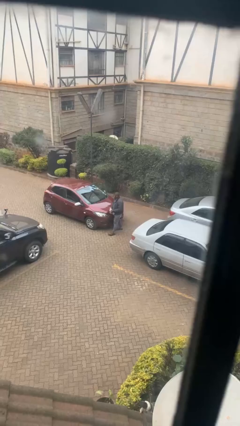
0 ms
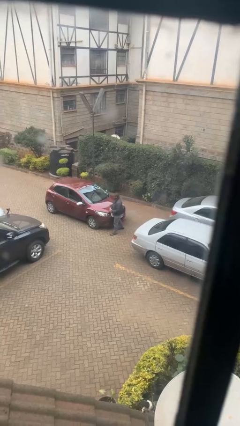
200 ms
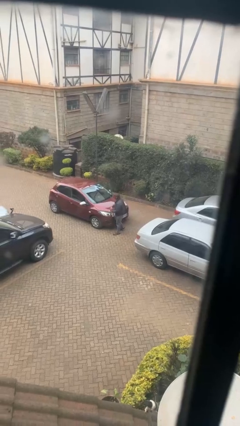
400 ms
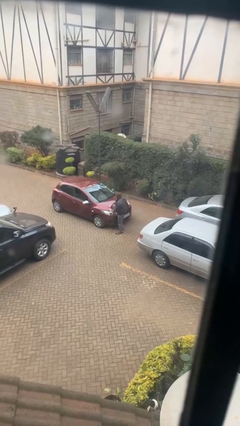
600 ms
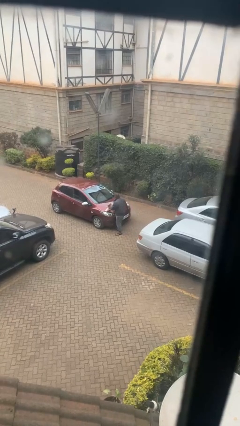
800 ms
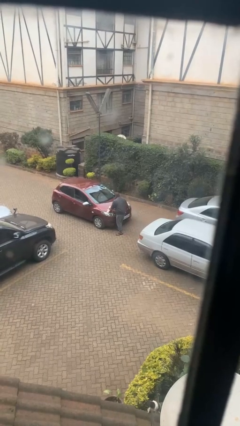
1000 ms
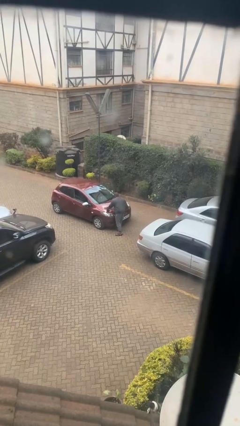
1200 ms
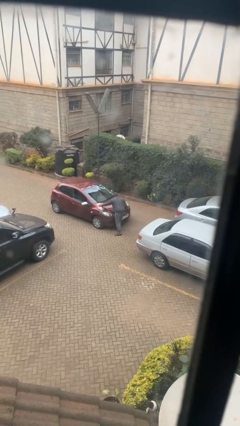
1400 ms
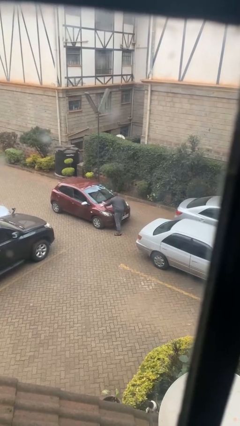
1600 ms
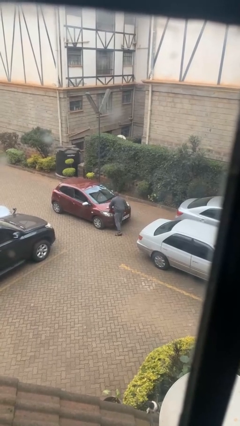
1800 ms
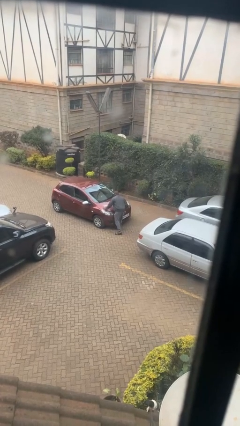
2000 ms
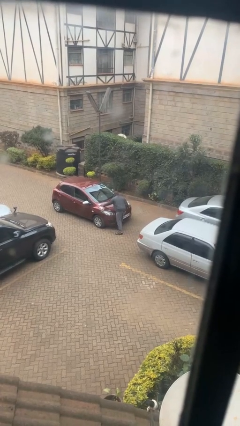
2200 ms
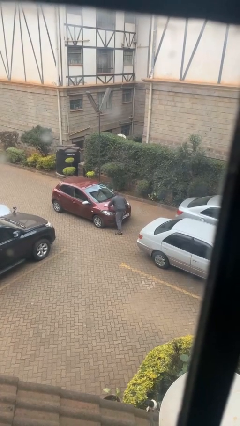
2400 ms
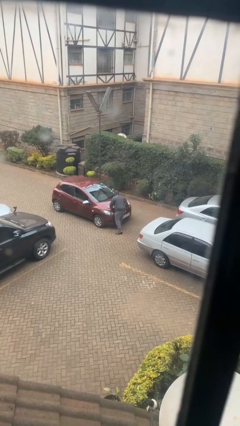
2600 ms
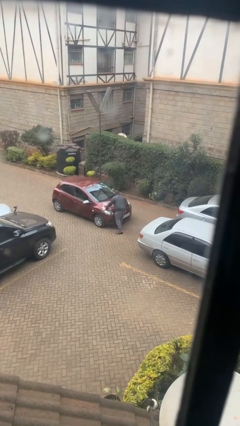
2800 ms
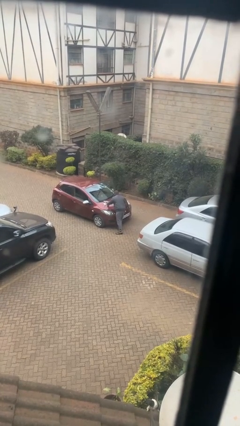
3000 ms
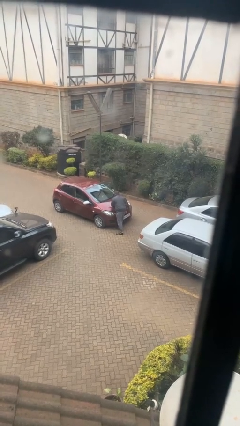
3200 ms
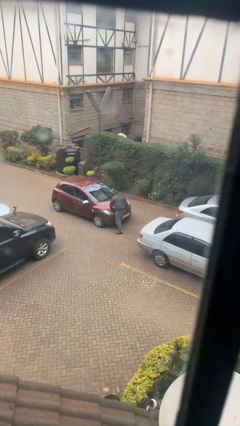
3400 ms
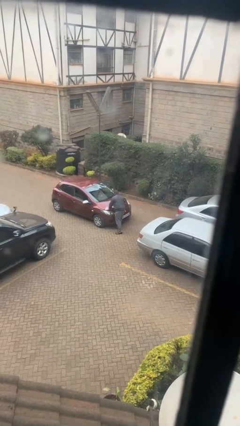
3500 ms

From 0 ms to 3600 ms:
person polishes car with rag

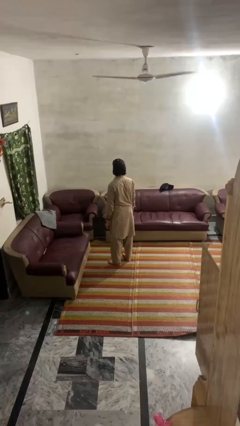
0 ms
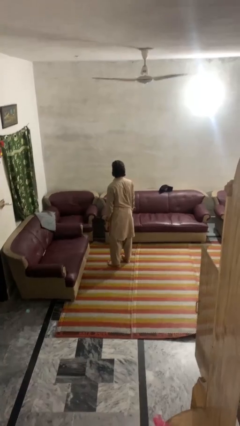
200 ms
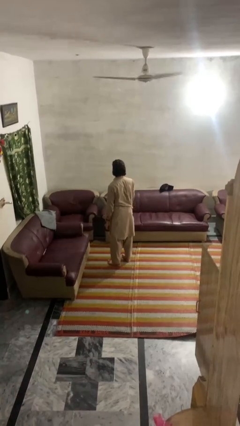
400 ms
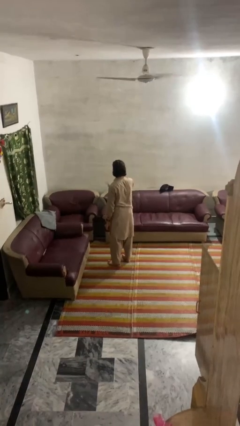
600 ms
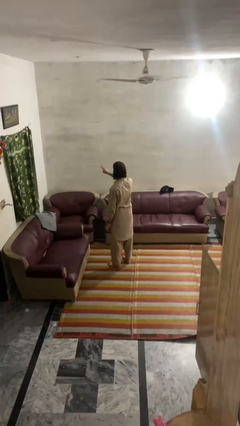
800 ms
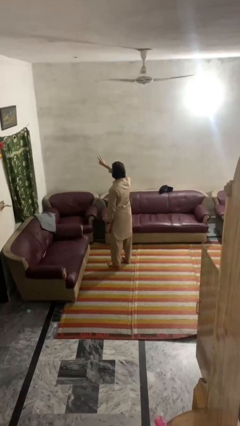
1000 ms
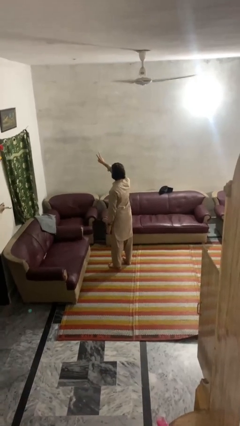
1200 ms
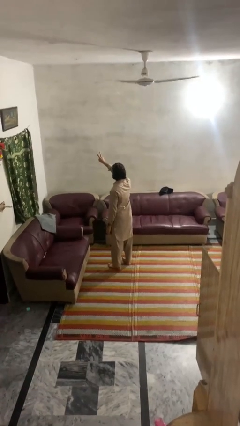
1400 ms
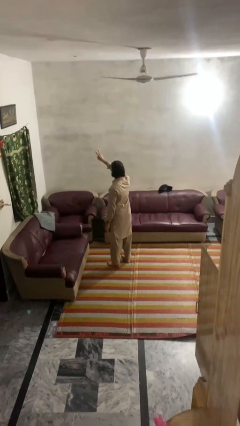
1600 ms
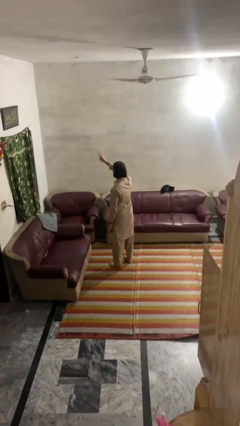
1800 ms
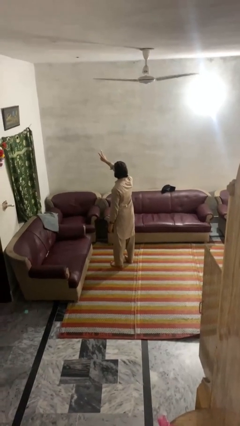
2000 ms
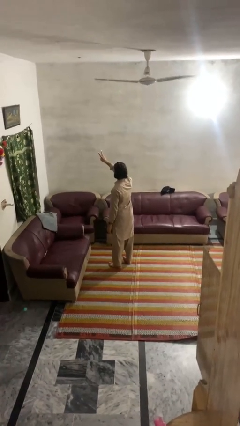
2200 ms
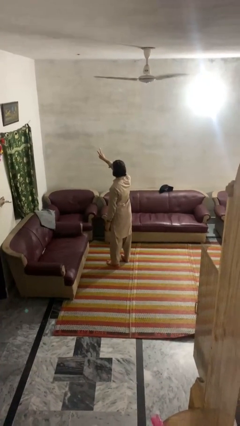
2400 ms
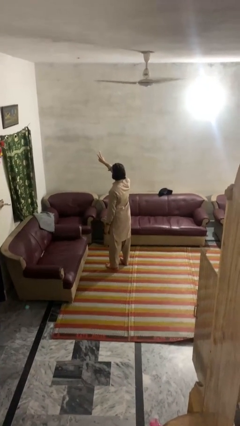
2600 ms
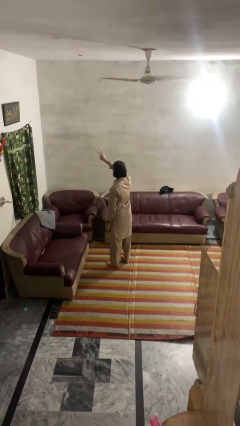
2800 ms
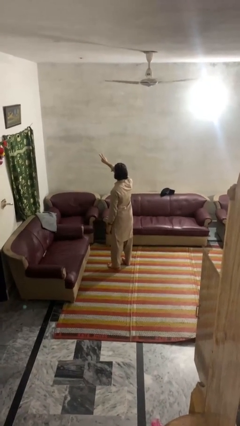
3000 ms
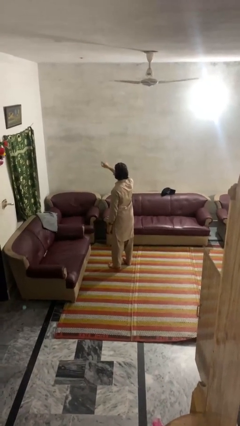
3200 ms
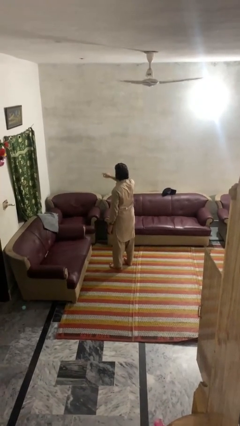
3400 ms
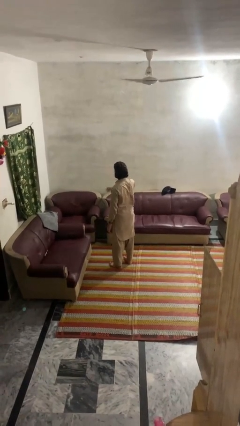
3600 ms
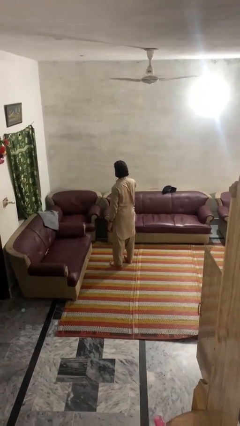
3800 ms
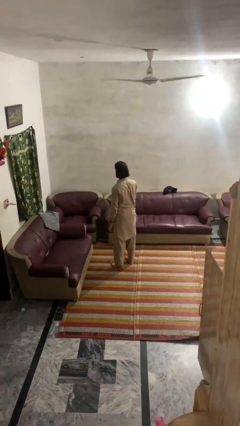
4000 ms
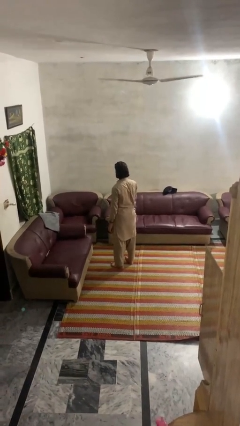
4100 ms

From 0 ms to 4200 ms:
person gestures peace

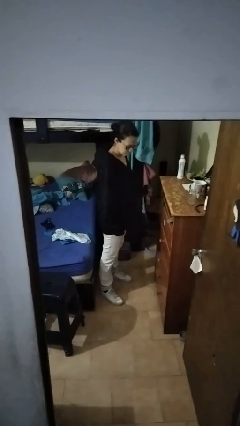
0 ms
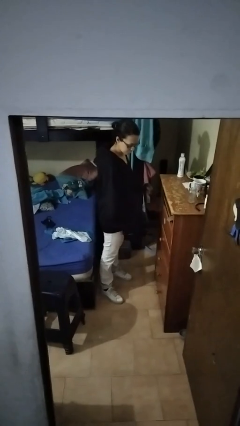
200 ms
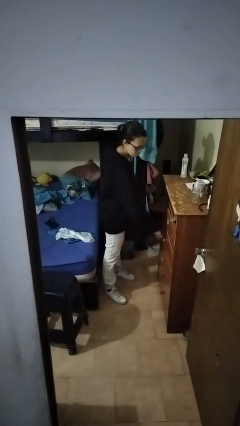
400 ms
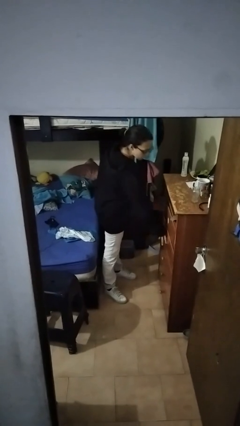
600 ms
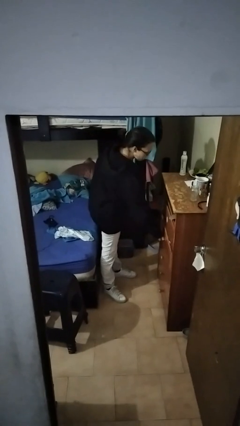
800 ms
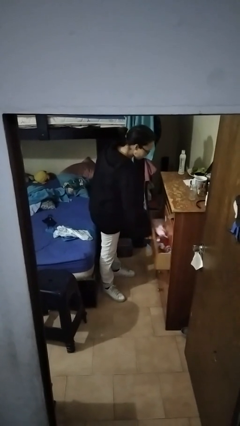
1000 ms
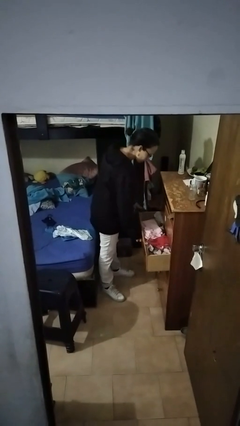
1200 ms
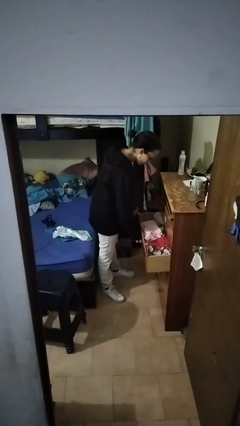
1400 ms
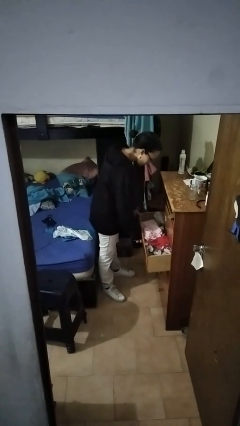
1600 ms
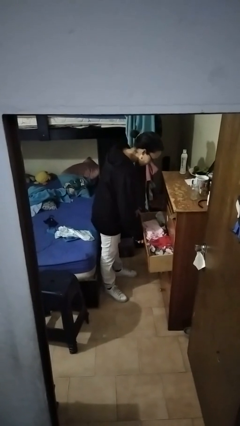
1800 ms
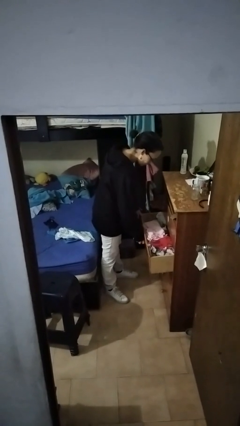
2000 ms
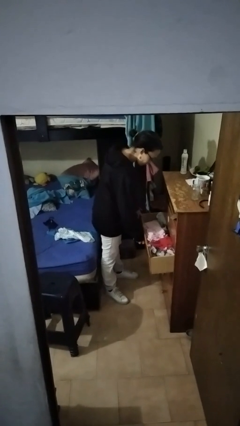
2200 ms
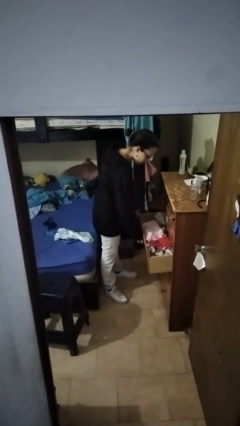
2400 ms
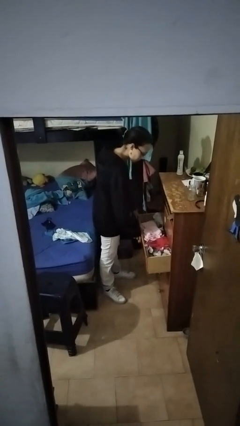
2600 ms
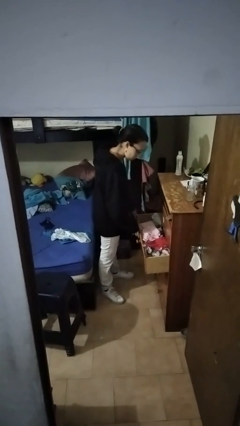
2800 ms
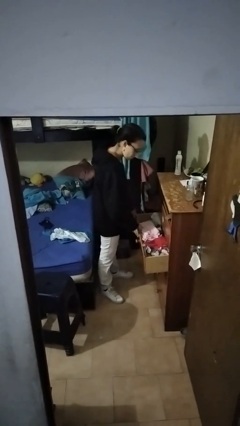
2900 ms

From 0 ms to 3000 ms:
person opens dresser drawer

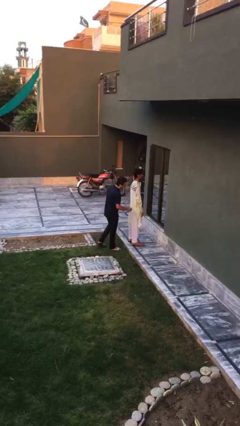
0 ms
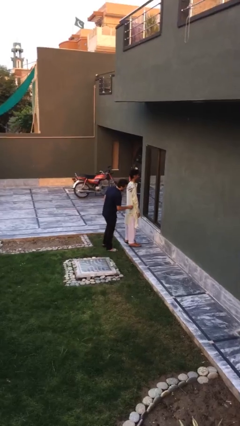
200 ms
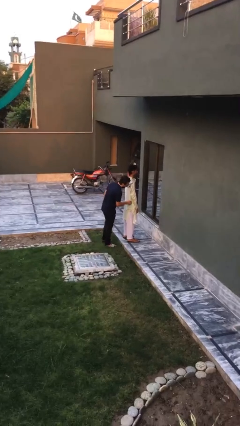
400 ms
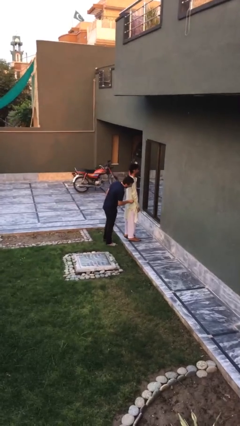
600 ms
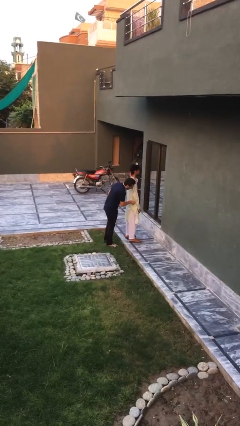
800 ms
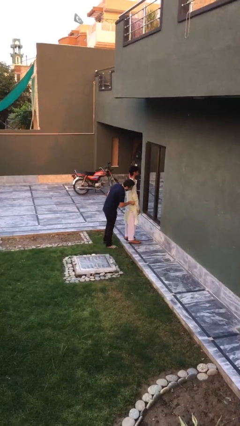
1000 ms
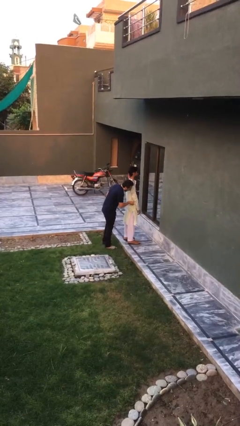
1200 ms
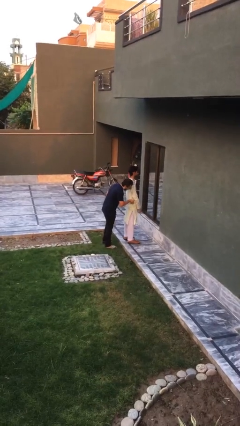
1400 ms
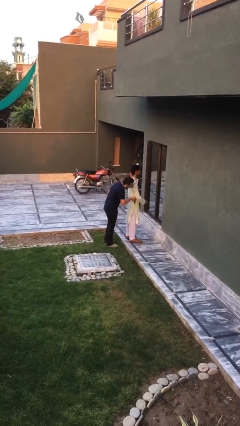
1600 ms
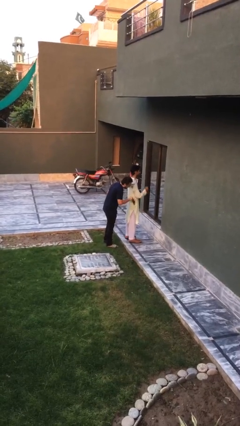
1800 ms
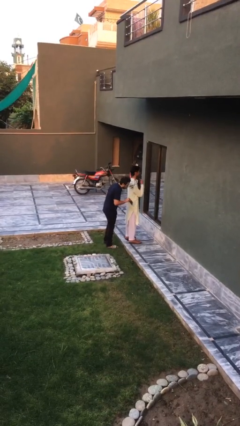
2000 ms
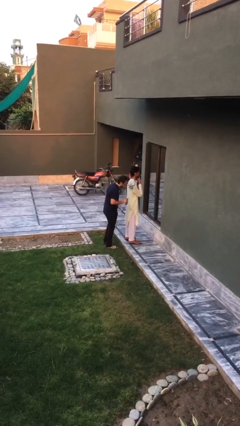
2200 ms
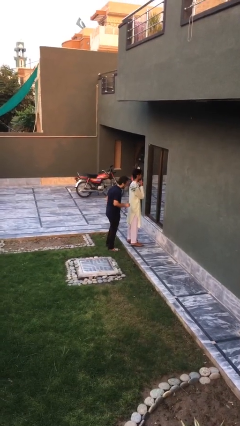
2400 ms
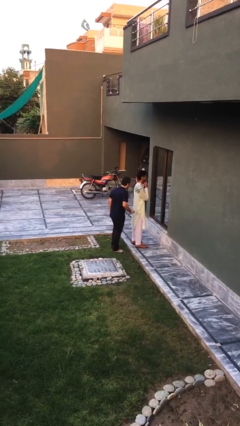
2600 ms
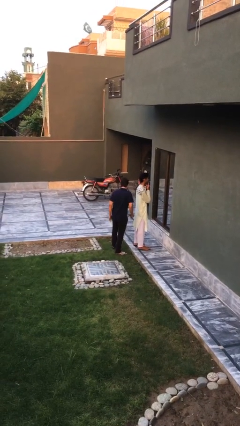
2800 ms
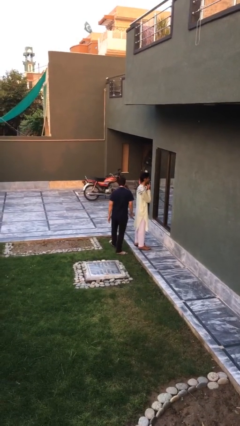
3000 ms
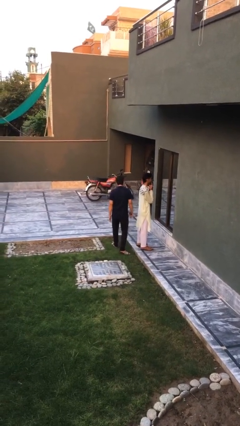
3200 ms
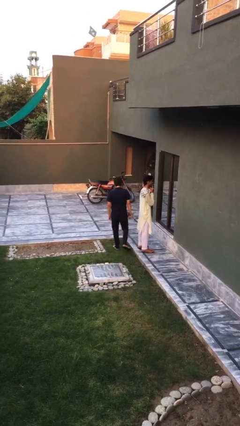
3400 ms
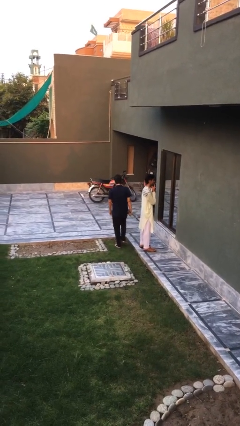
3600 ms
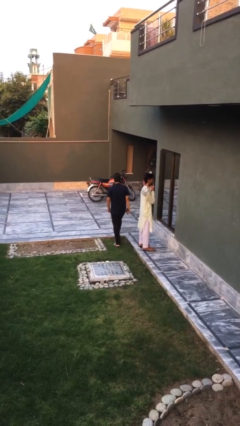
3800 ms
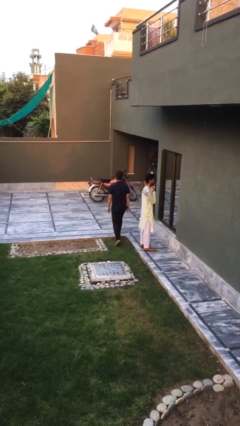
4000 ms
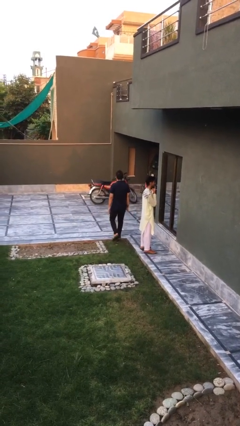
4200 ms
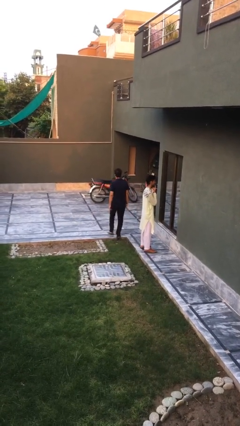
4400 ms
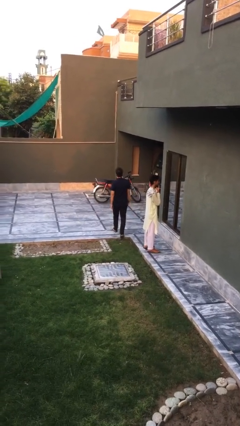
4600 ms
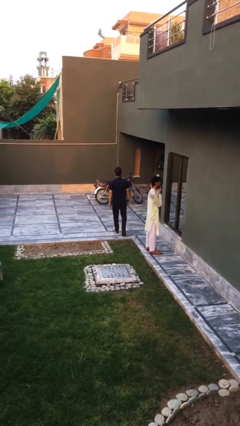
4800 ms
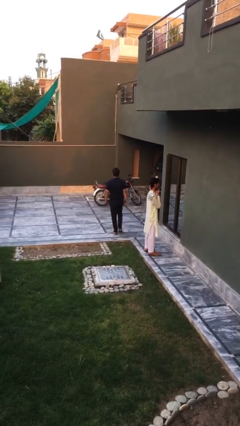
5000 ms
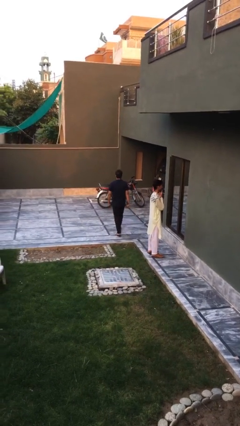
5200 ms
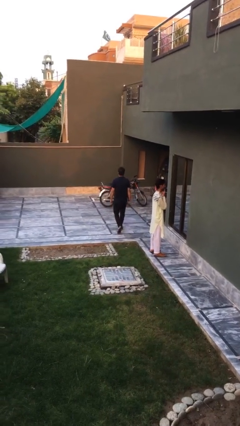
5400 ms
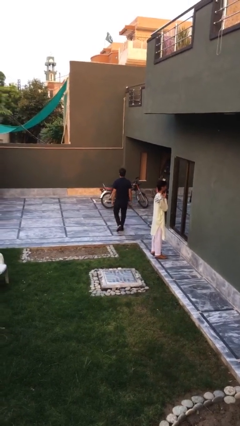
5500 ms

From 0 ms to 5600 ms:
person steals object from person

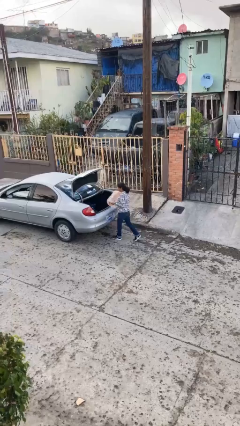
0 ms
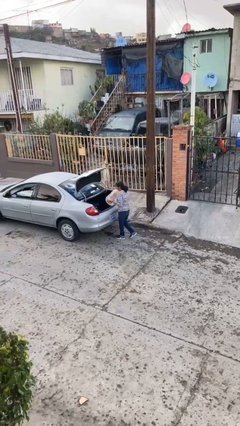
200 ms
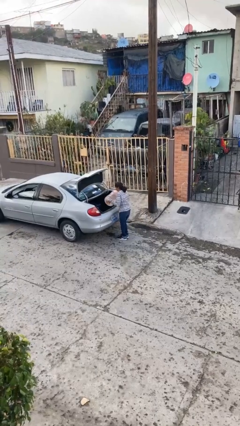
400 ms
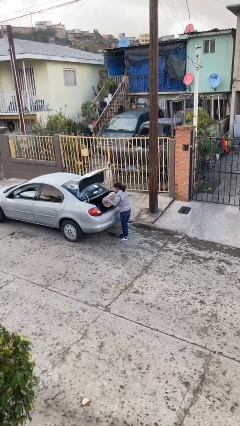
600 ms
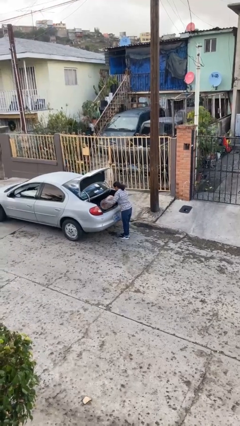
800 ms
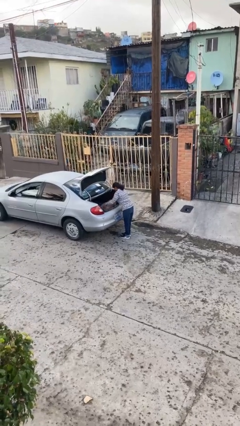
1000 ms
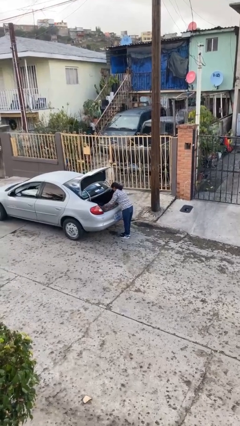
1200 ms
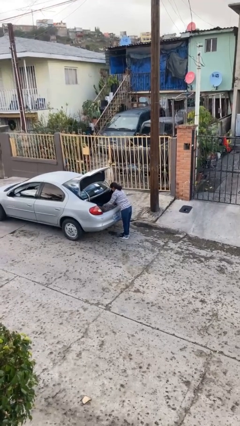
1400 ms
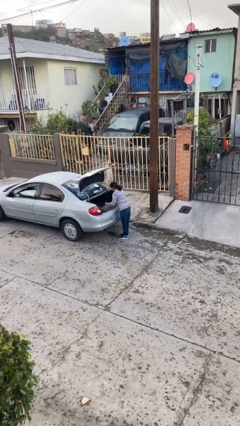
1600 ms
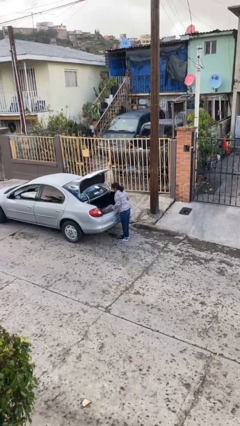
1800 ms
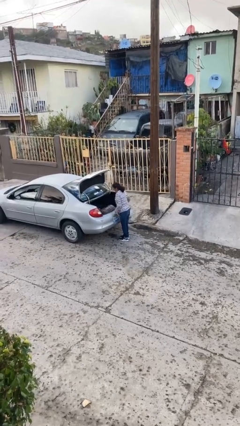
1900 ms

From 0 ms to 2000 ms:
person loads car
